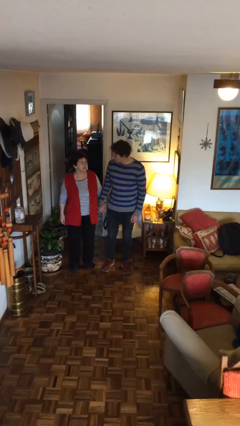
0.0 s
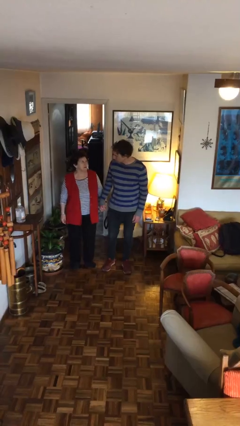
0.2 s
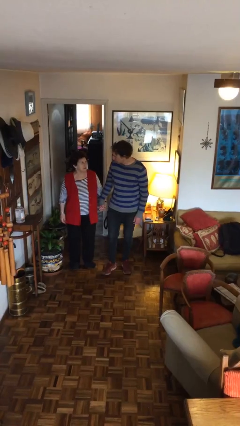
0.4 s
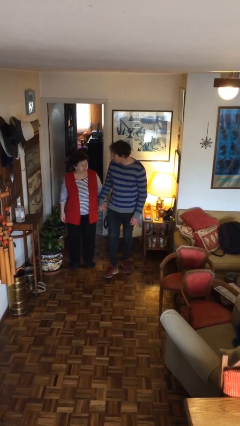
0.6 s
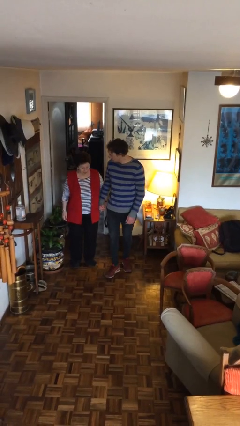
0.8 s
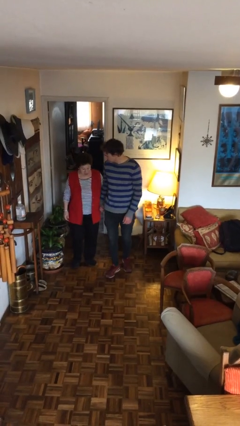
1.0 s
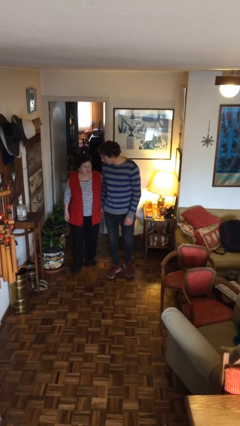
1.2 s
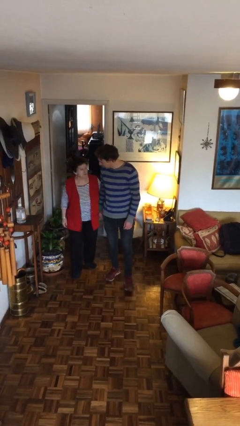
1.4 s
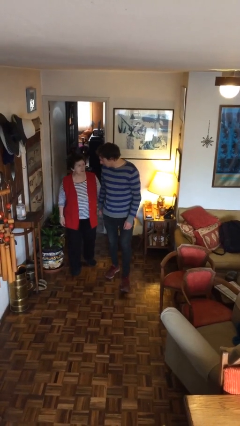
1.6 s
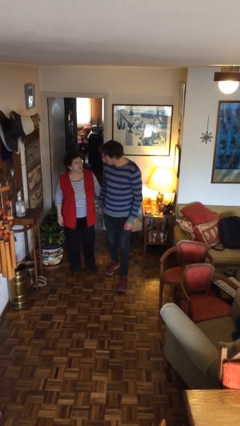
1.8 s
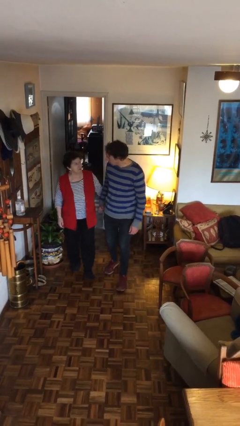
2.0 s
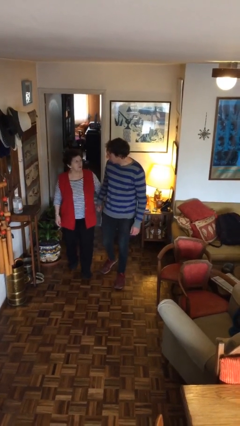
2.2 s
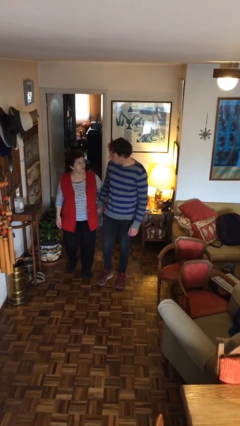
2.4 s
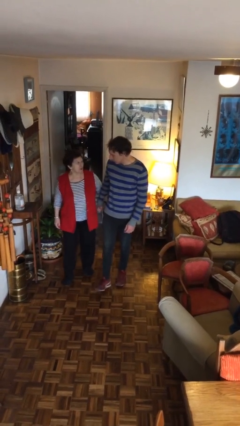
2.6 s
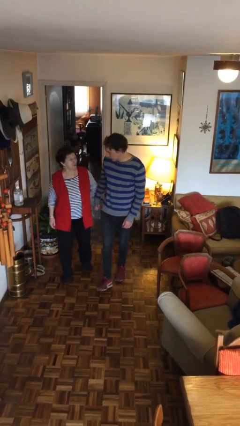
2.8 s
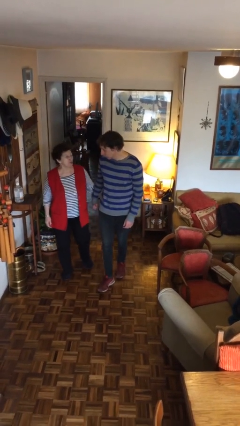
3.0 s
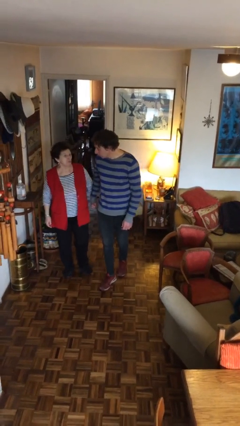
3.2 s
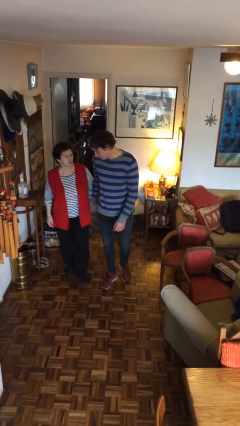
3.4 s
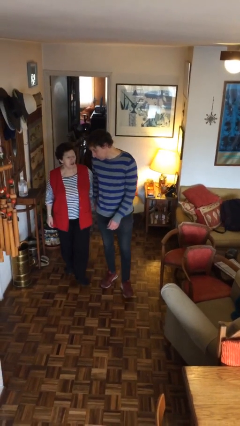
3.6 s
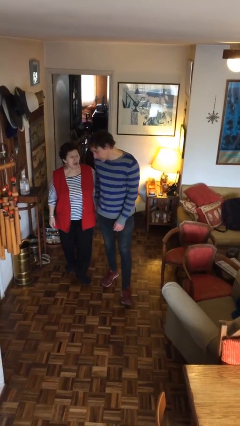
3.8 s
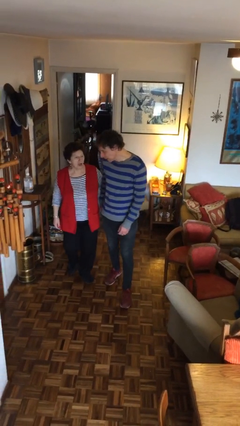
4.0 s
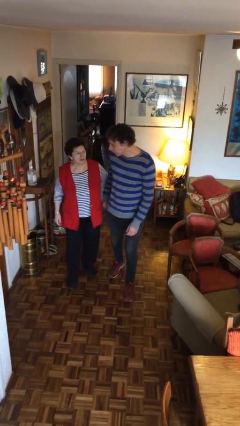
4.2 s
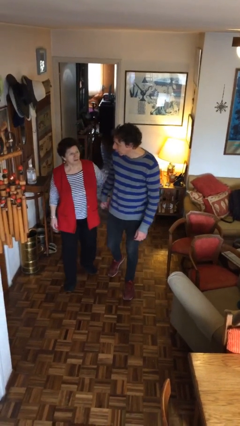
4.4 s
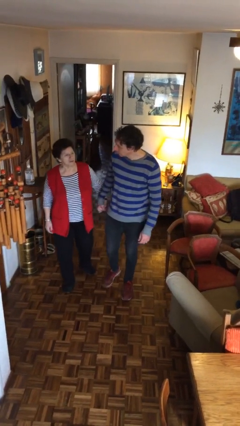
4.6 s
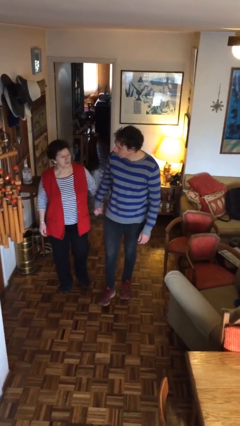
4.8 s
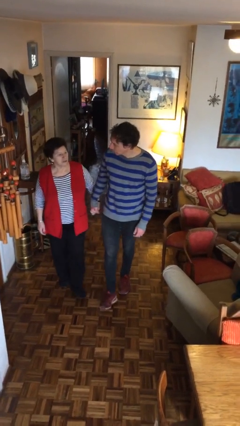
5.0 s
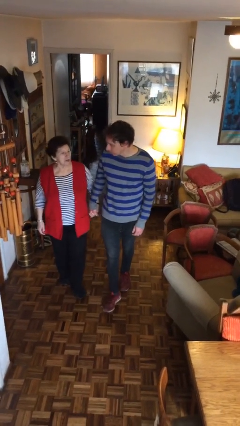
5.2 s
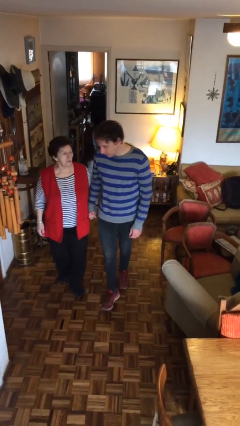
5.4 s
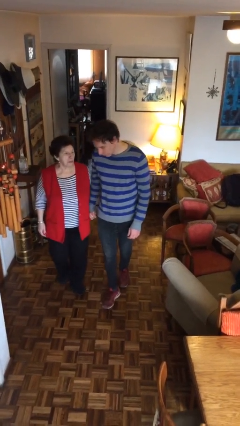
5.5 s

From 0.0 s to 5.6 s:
person holds hand

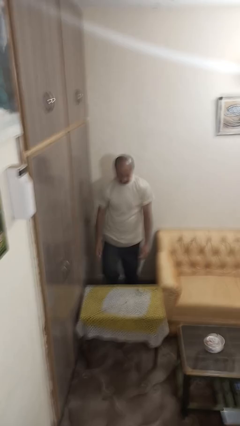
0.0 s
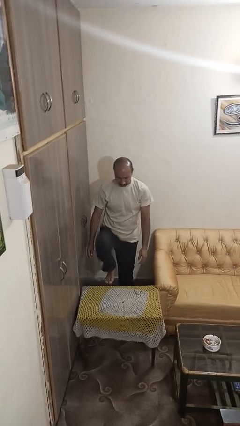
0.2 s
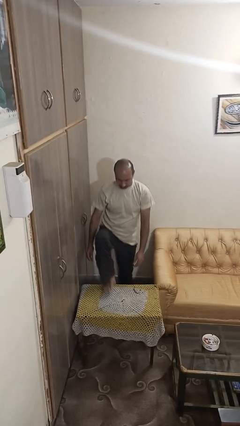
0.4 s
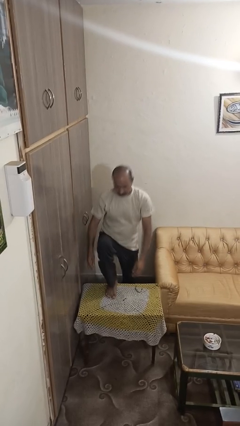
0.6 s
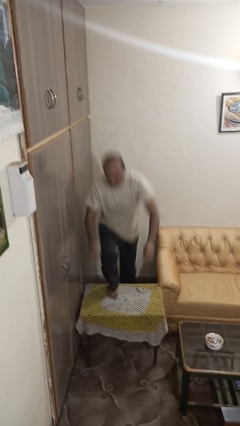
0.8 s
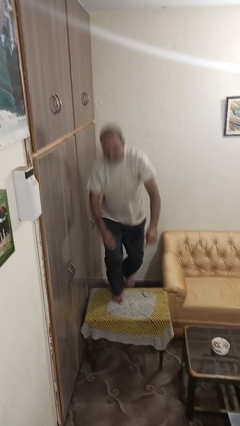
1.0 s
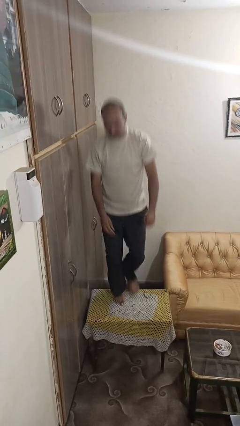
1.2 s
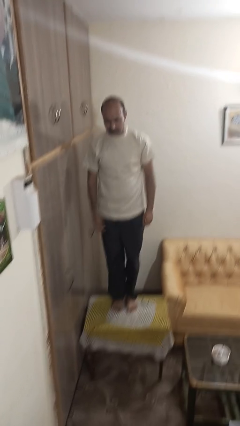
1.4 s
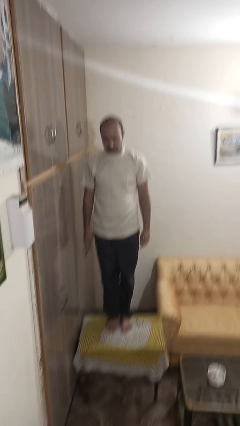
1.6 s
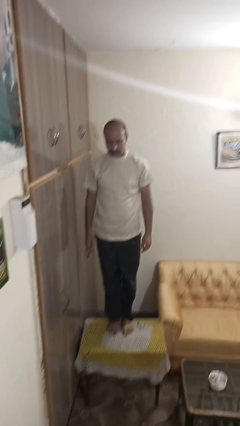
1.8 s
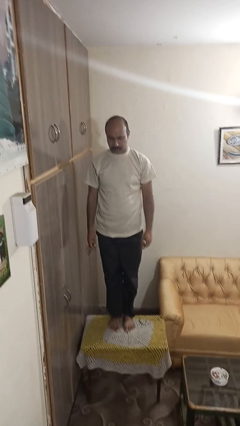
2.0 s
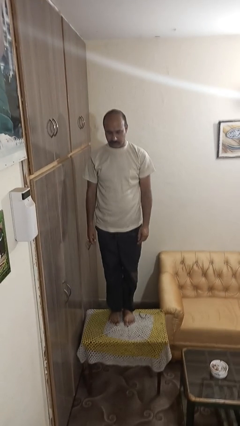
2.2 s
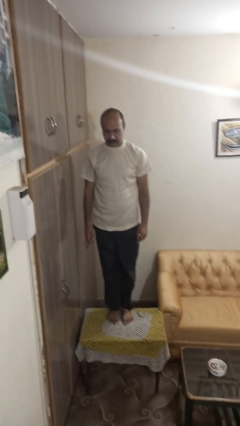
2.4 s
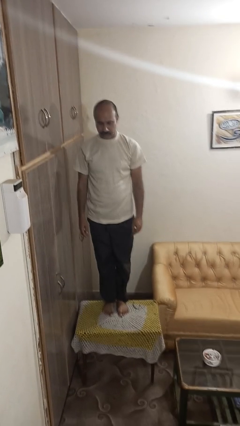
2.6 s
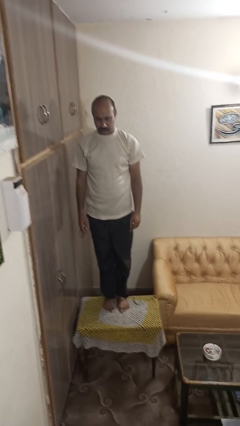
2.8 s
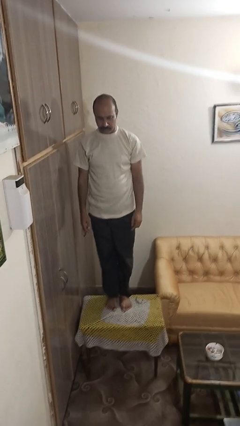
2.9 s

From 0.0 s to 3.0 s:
person climbs on table

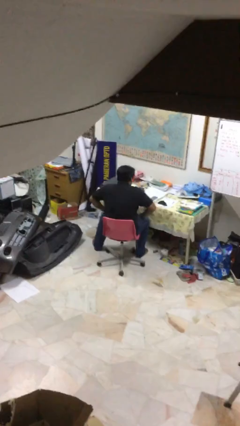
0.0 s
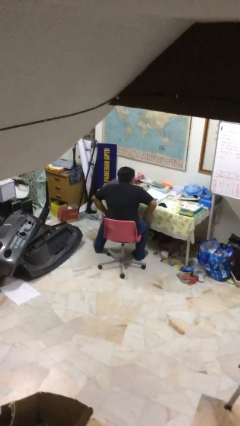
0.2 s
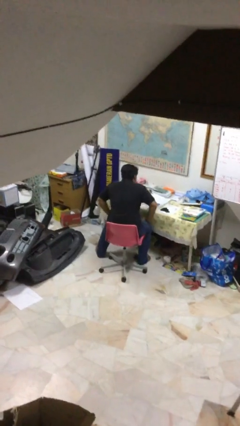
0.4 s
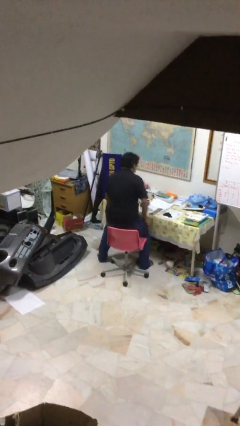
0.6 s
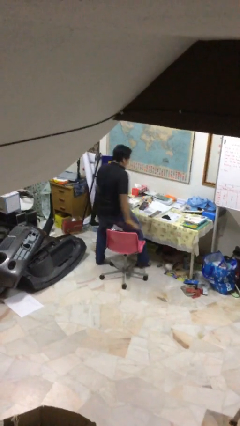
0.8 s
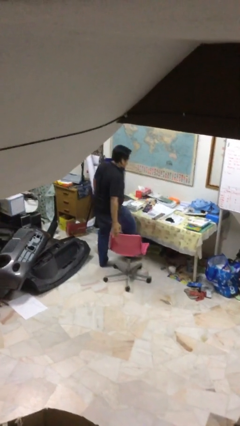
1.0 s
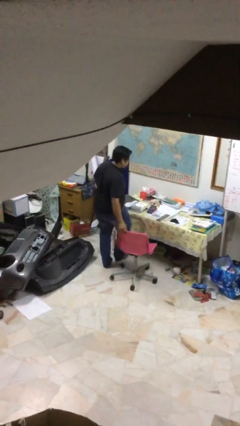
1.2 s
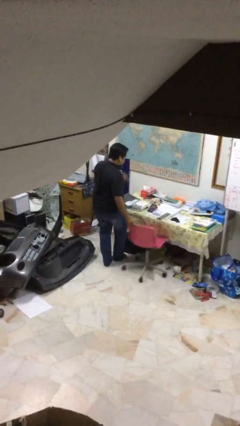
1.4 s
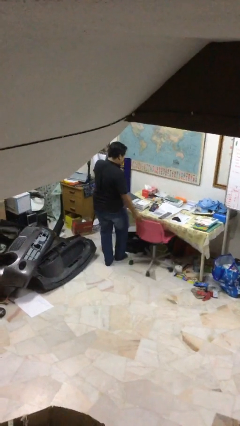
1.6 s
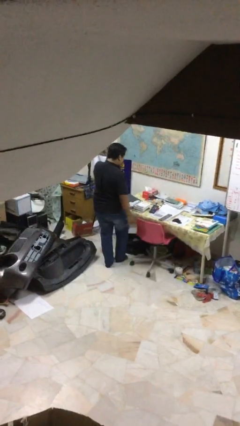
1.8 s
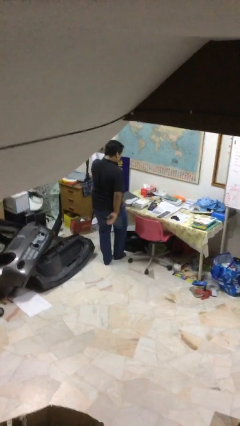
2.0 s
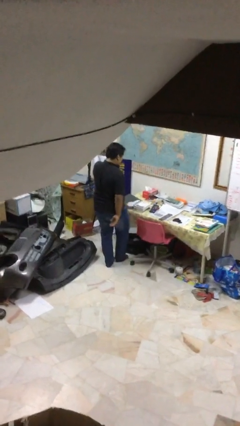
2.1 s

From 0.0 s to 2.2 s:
person stands up

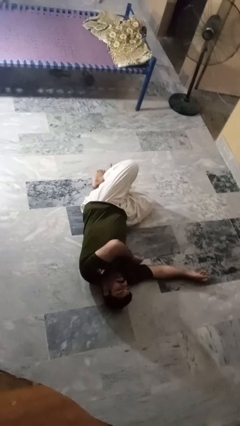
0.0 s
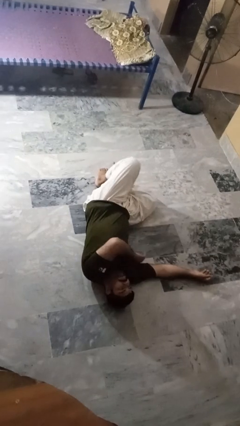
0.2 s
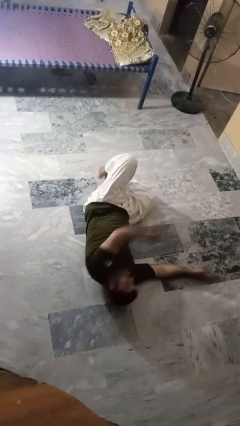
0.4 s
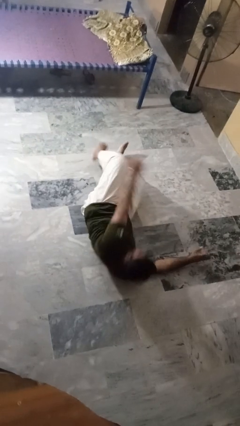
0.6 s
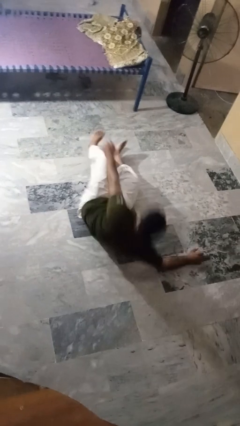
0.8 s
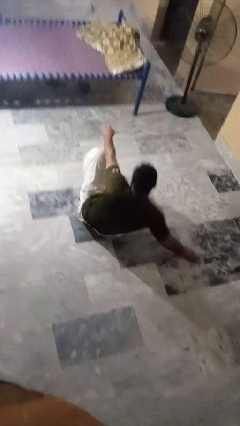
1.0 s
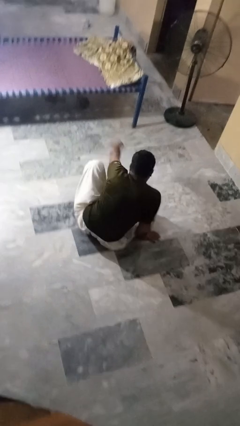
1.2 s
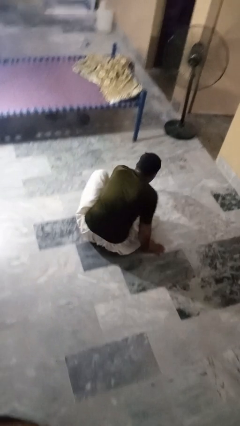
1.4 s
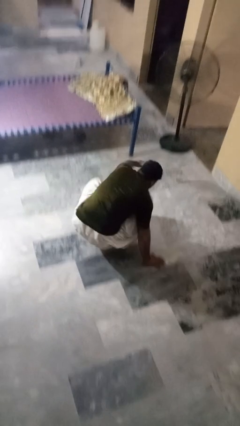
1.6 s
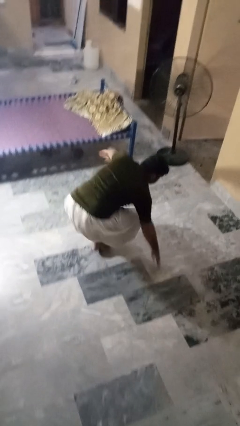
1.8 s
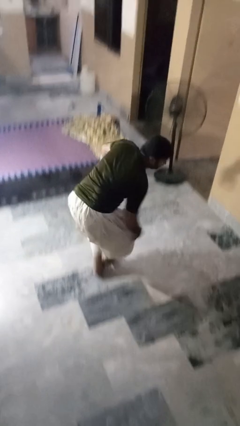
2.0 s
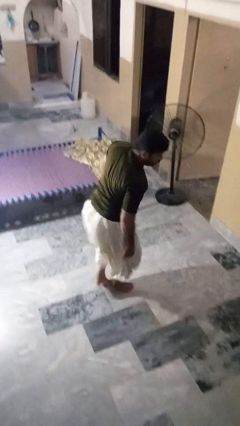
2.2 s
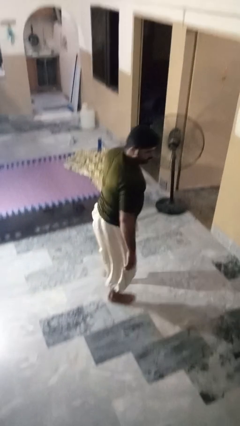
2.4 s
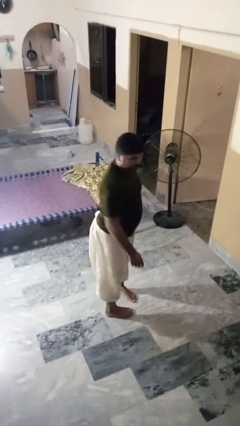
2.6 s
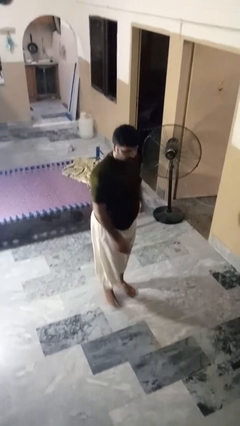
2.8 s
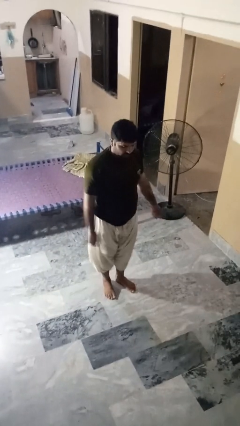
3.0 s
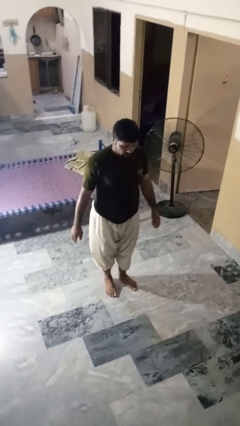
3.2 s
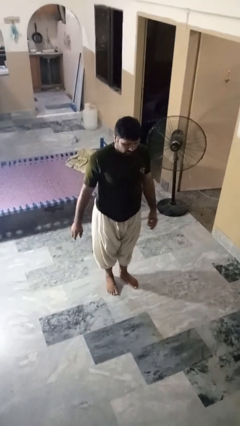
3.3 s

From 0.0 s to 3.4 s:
person stands up from floor

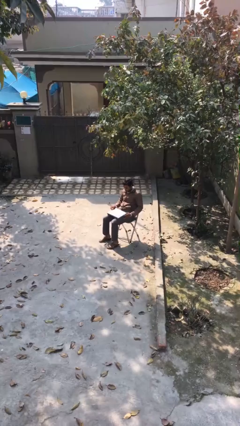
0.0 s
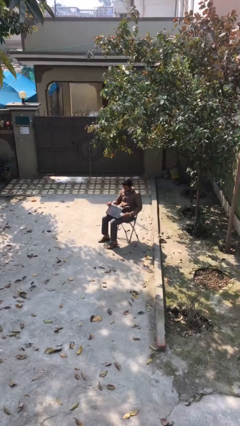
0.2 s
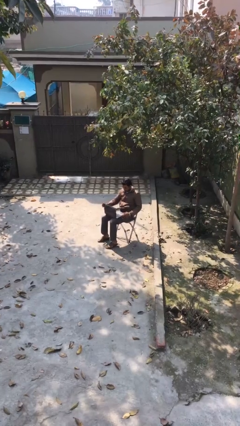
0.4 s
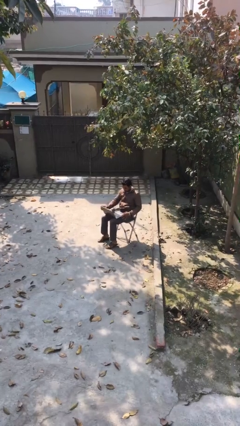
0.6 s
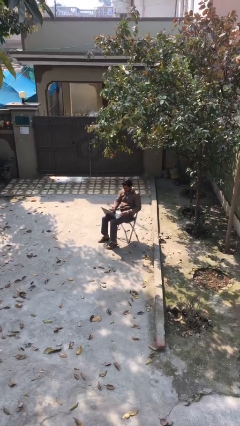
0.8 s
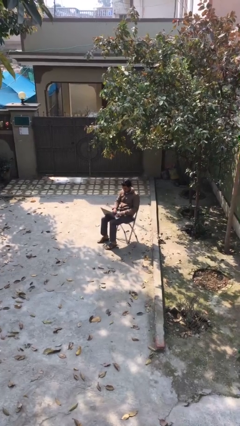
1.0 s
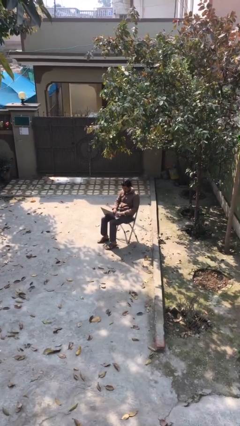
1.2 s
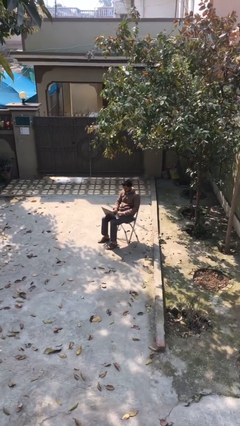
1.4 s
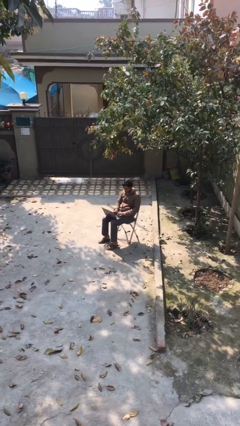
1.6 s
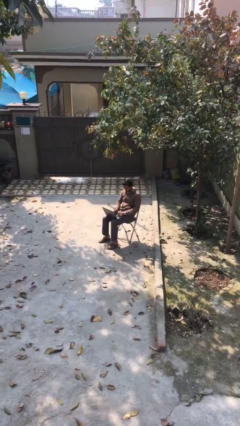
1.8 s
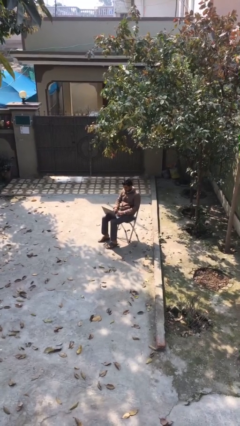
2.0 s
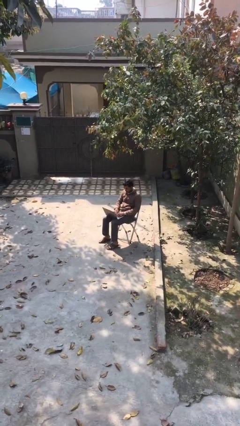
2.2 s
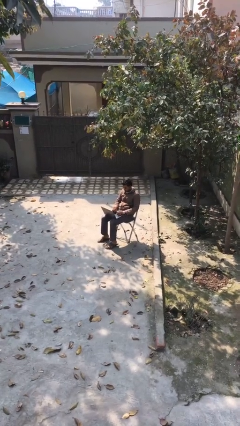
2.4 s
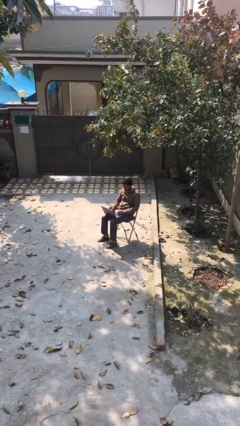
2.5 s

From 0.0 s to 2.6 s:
person interacts with laptop

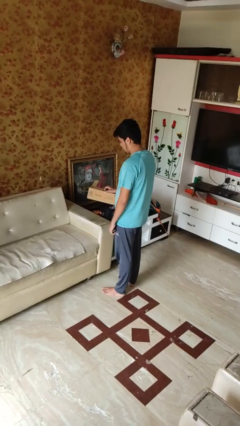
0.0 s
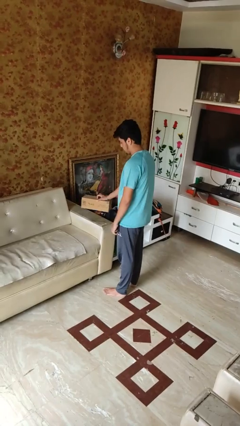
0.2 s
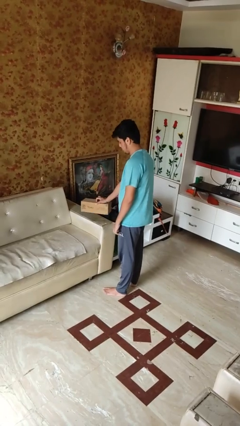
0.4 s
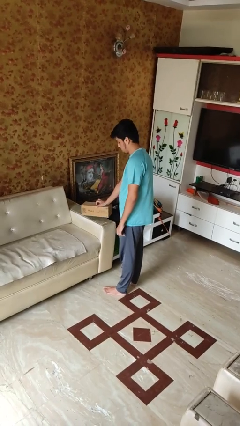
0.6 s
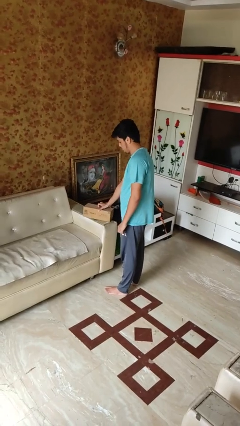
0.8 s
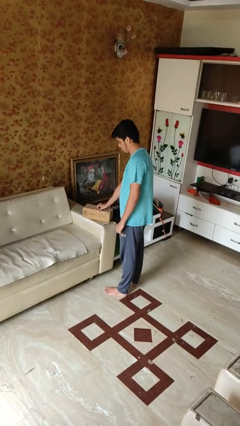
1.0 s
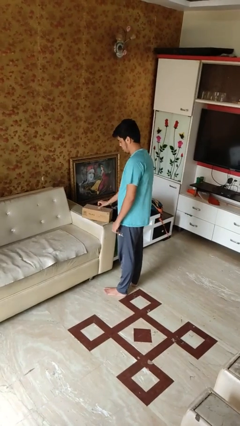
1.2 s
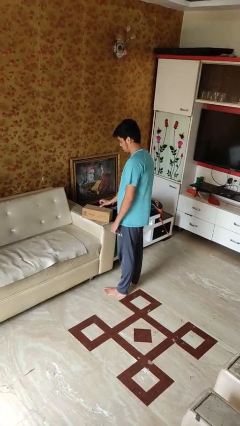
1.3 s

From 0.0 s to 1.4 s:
person puts down object on couch
